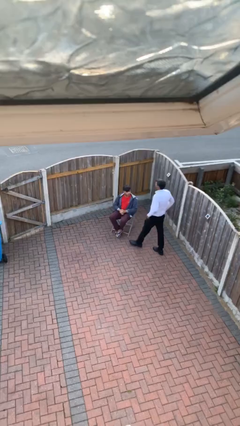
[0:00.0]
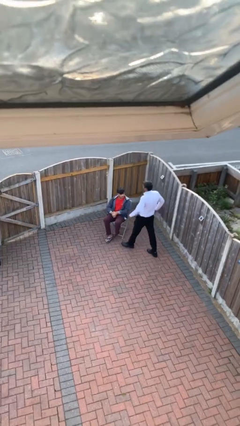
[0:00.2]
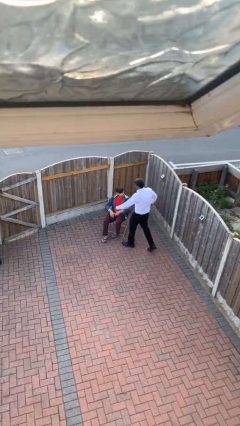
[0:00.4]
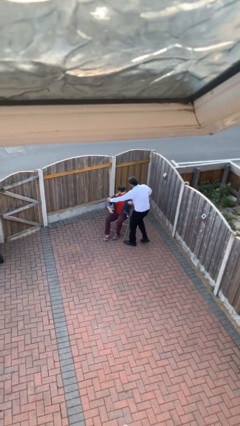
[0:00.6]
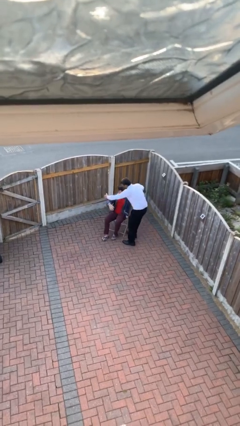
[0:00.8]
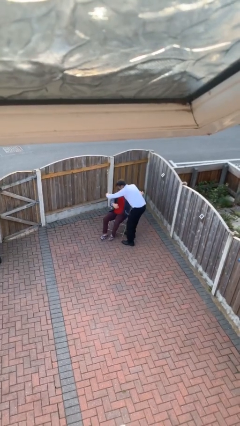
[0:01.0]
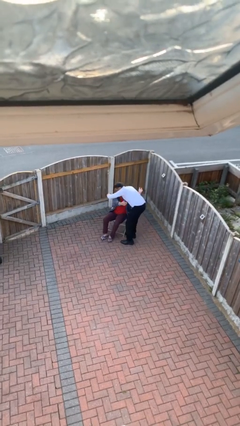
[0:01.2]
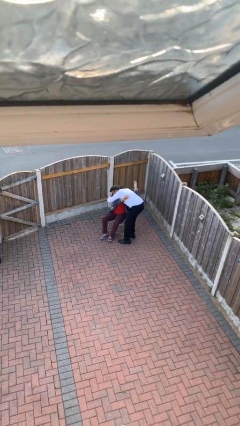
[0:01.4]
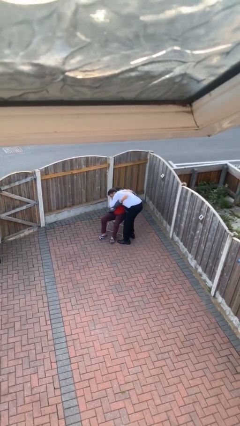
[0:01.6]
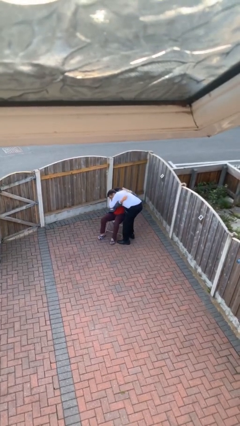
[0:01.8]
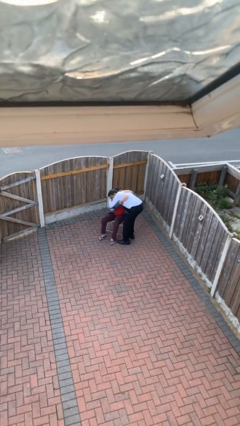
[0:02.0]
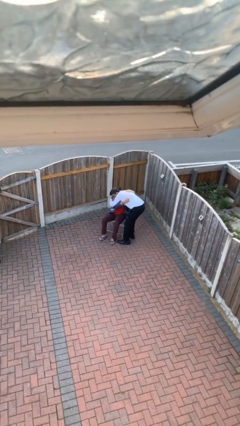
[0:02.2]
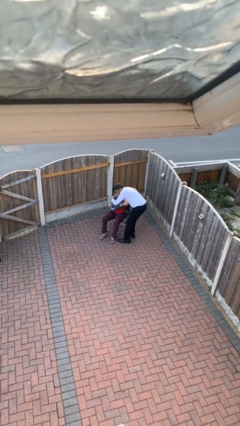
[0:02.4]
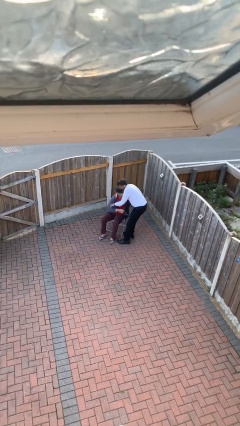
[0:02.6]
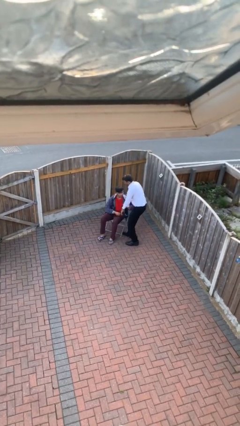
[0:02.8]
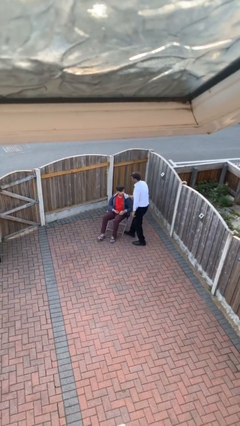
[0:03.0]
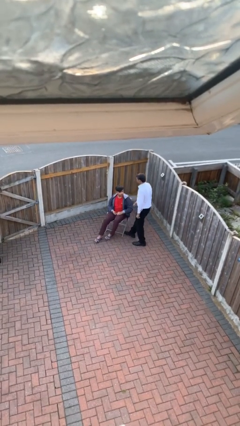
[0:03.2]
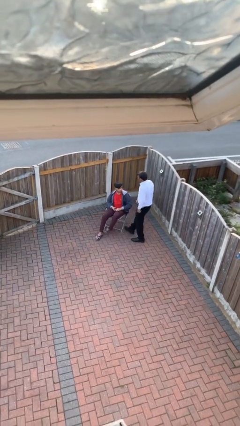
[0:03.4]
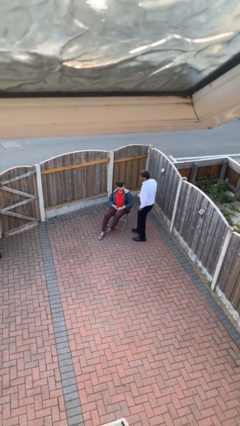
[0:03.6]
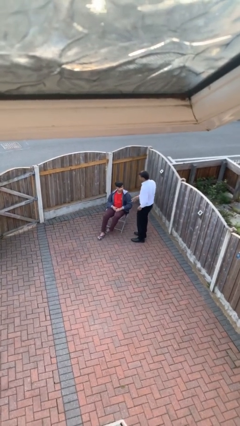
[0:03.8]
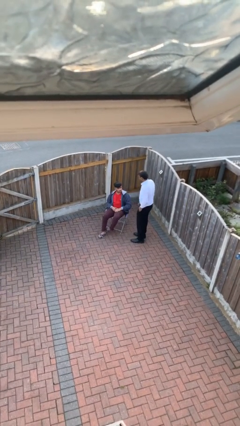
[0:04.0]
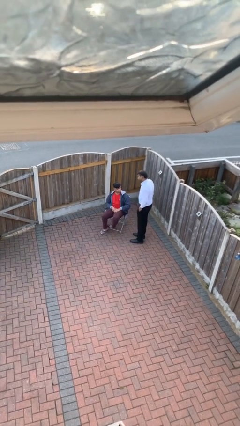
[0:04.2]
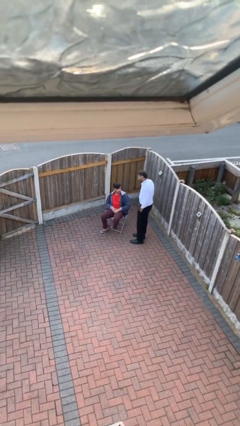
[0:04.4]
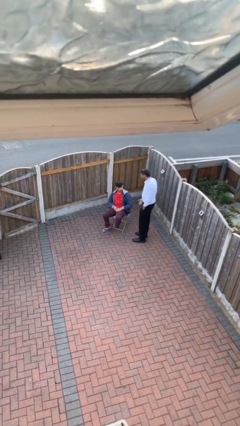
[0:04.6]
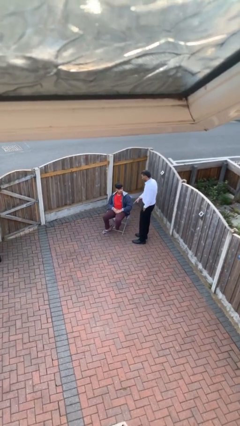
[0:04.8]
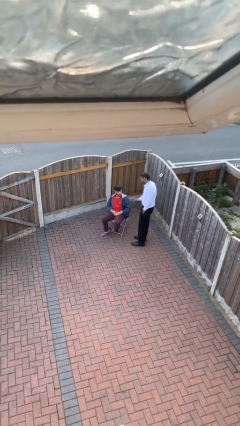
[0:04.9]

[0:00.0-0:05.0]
person embraces person

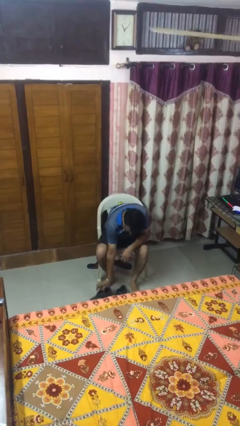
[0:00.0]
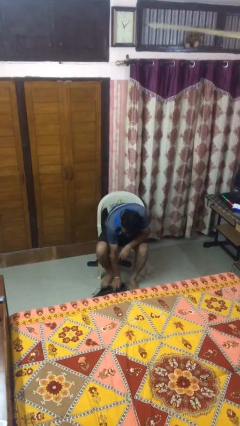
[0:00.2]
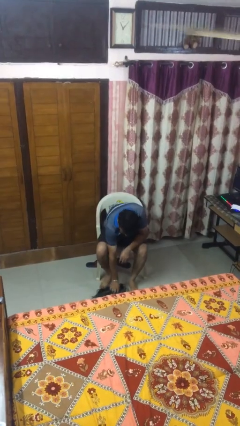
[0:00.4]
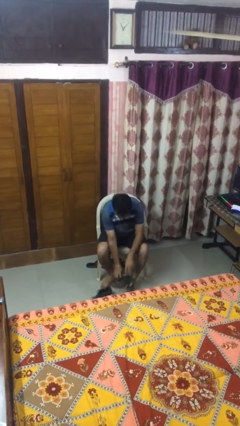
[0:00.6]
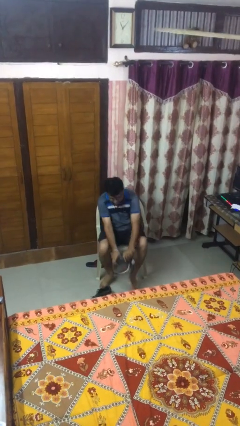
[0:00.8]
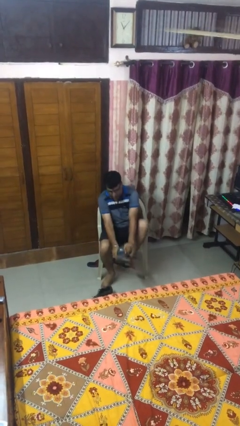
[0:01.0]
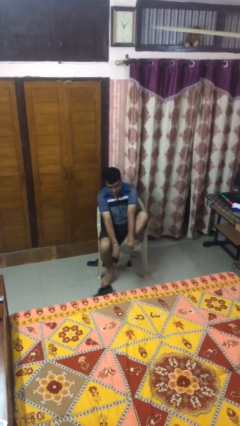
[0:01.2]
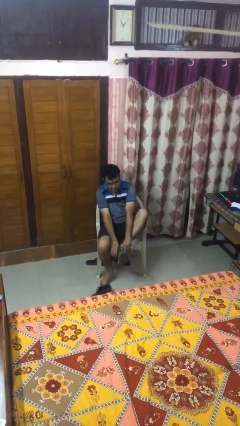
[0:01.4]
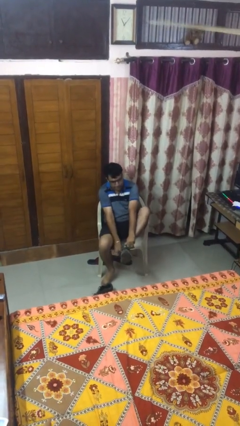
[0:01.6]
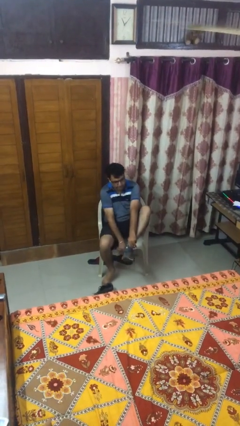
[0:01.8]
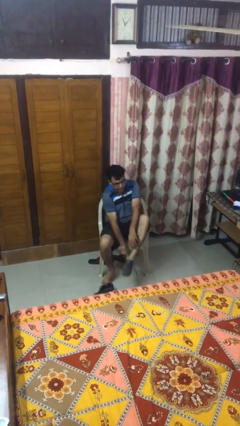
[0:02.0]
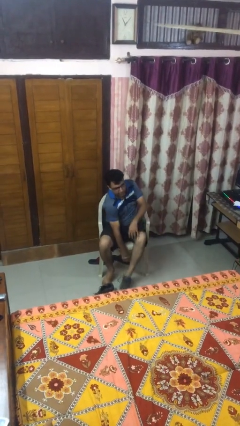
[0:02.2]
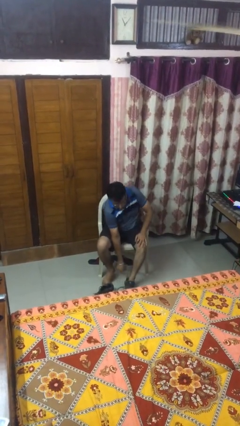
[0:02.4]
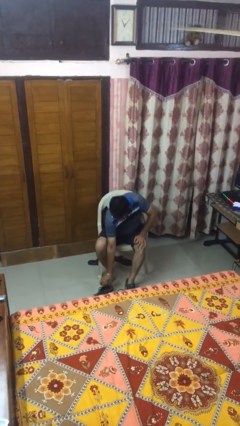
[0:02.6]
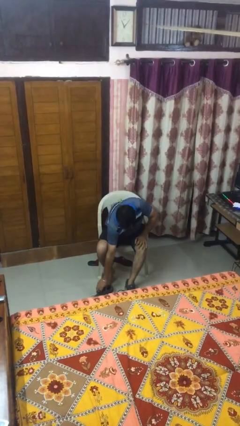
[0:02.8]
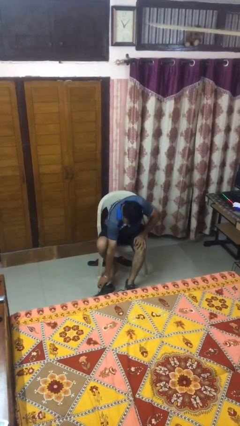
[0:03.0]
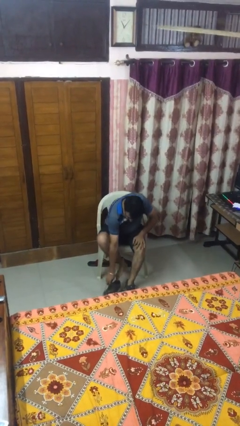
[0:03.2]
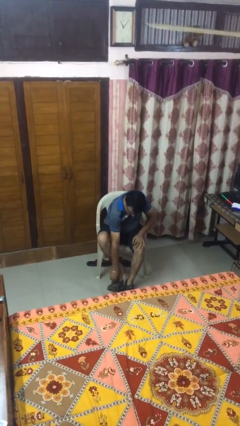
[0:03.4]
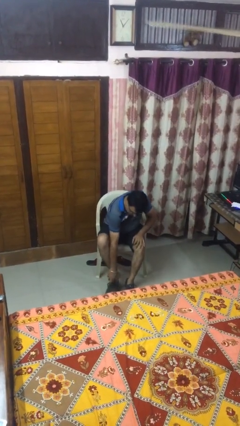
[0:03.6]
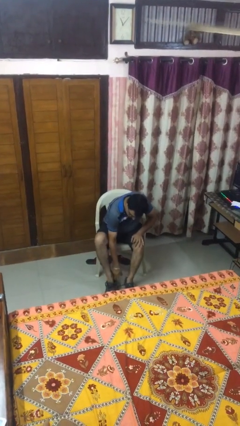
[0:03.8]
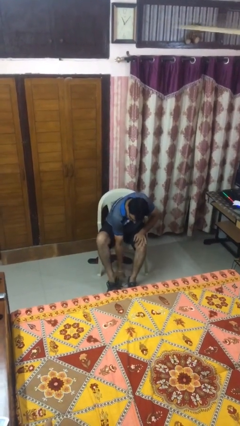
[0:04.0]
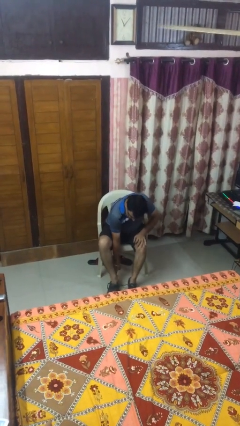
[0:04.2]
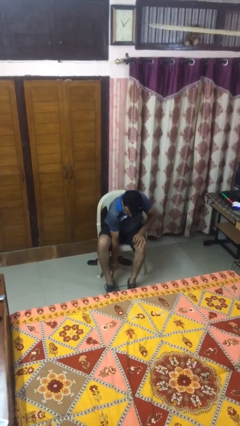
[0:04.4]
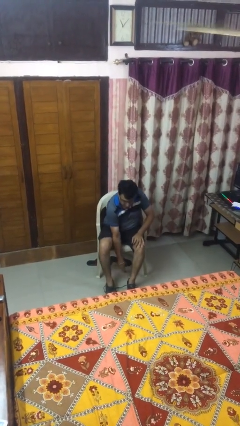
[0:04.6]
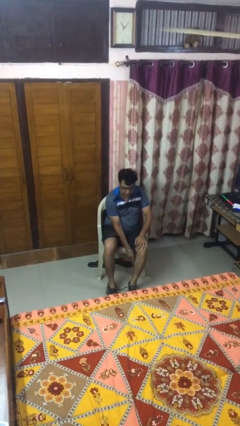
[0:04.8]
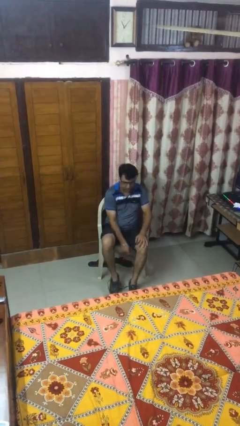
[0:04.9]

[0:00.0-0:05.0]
person puts on shoes

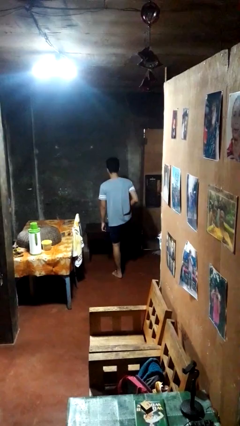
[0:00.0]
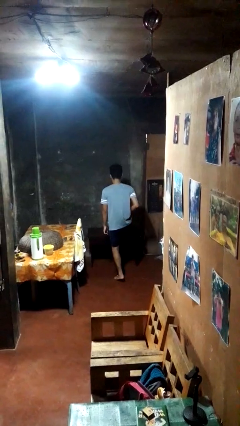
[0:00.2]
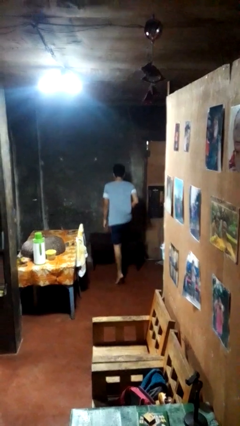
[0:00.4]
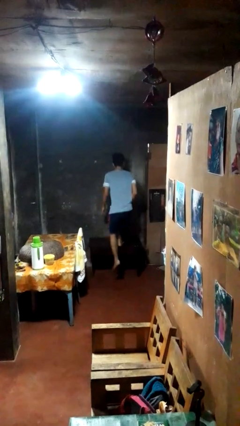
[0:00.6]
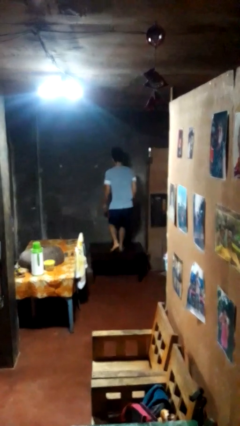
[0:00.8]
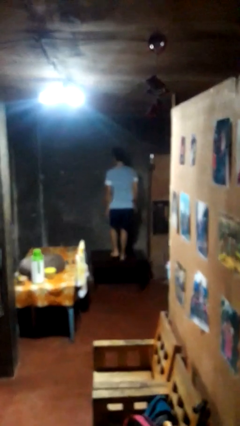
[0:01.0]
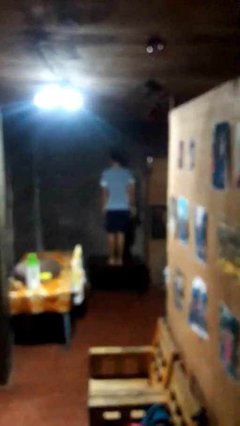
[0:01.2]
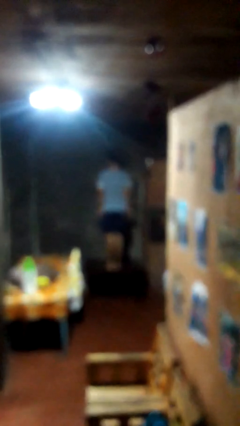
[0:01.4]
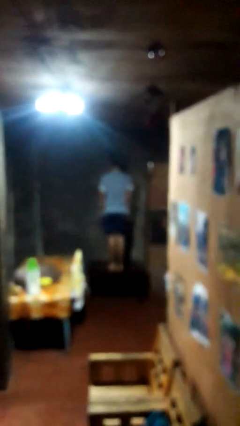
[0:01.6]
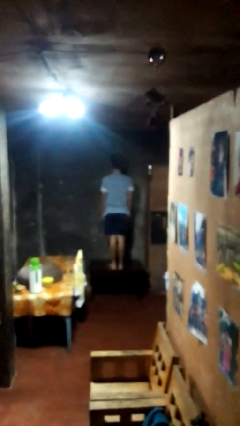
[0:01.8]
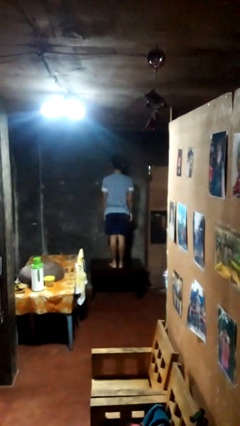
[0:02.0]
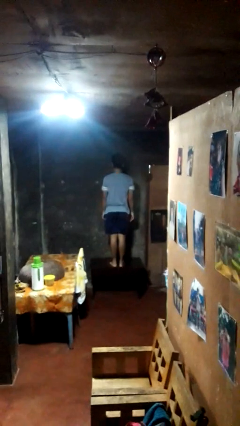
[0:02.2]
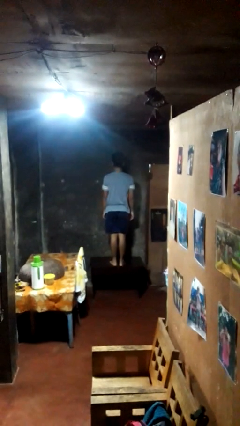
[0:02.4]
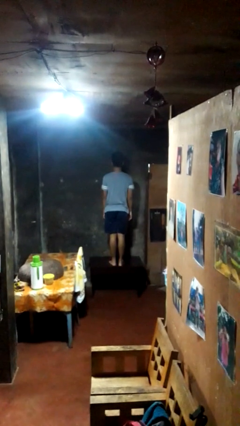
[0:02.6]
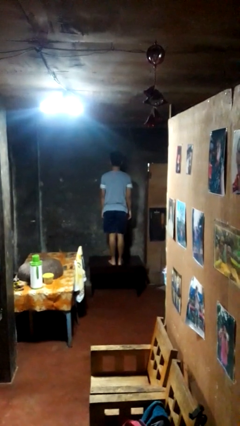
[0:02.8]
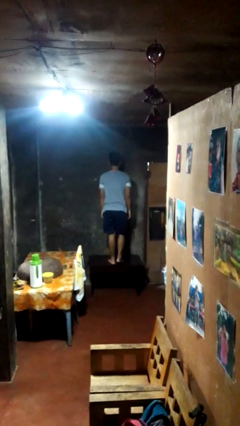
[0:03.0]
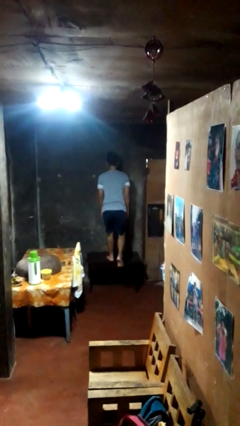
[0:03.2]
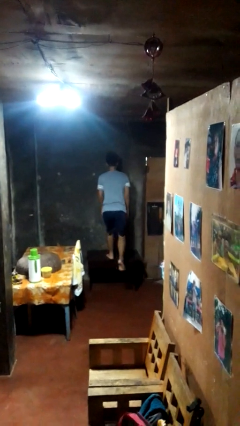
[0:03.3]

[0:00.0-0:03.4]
person climbs on table

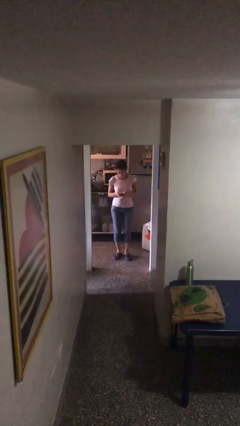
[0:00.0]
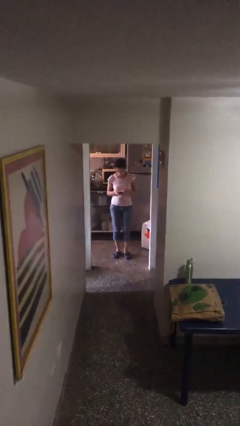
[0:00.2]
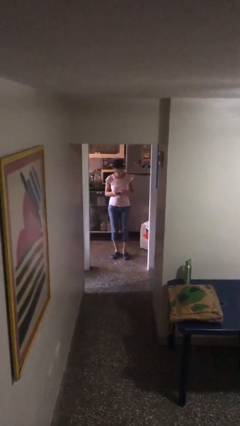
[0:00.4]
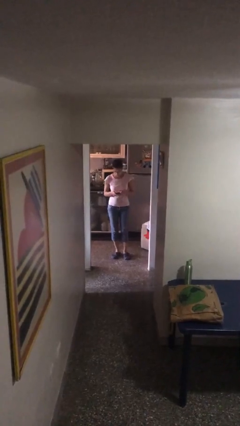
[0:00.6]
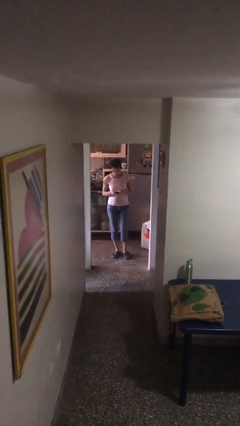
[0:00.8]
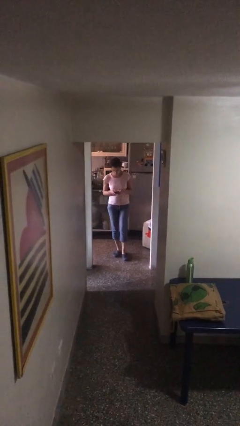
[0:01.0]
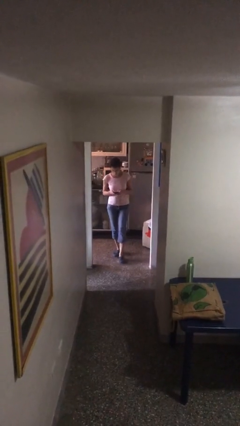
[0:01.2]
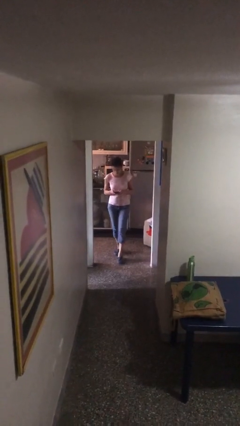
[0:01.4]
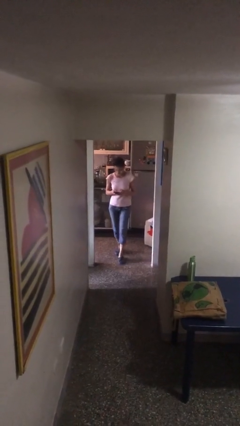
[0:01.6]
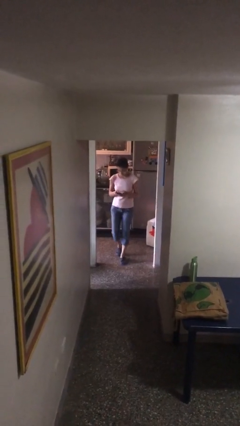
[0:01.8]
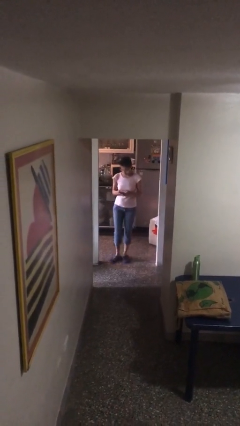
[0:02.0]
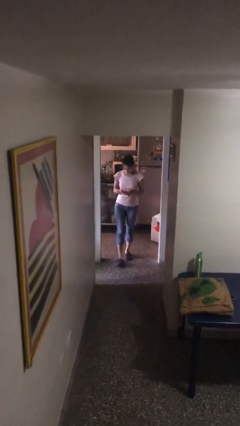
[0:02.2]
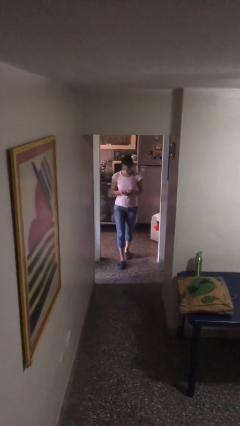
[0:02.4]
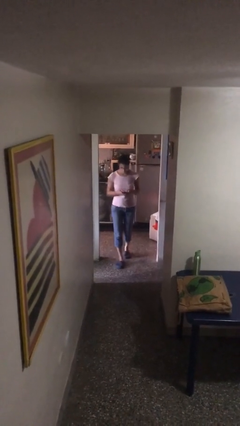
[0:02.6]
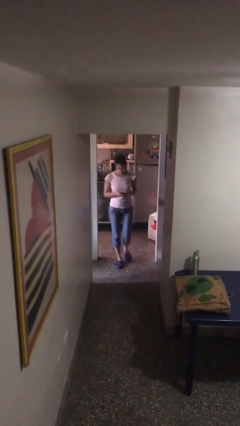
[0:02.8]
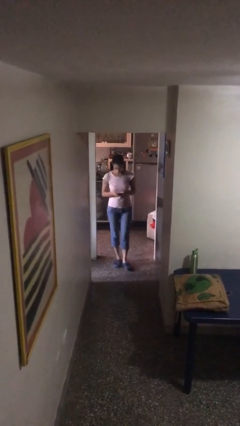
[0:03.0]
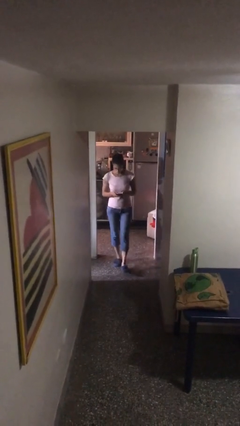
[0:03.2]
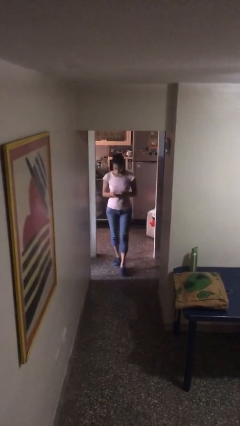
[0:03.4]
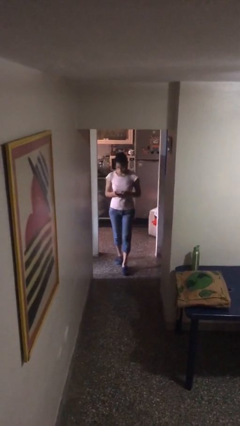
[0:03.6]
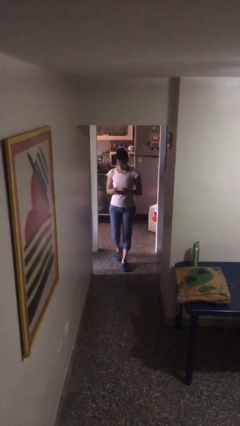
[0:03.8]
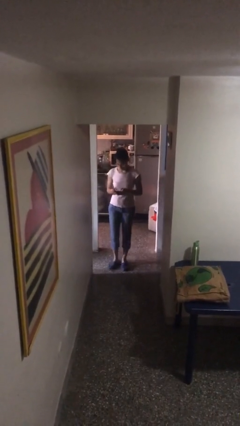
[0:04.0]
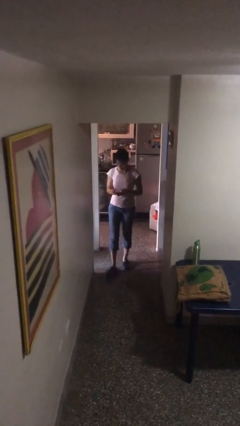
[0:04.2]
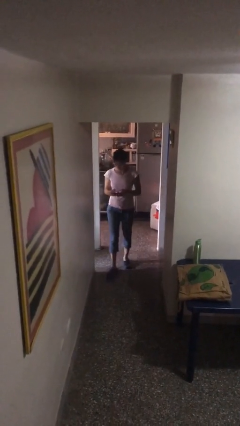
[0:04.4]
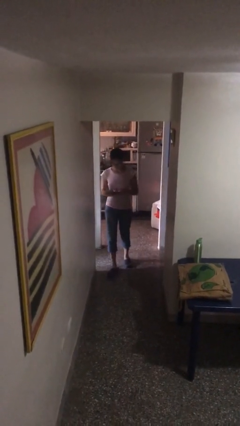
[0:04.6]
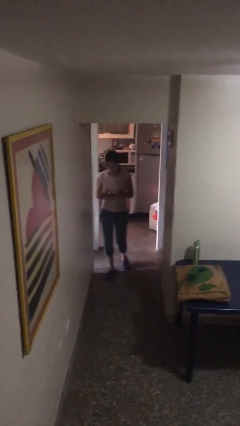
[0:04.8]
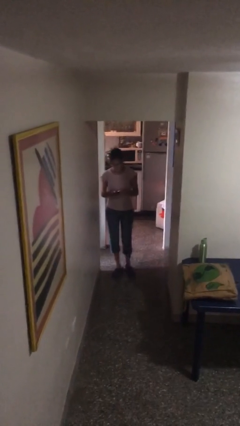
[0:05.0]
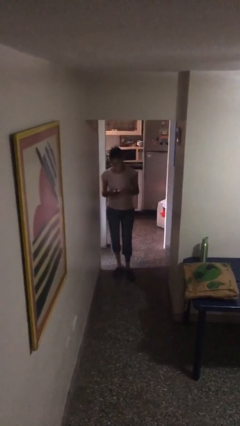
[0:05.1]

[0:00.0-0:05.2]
person texts on phone
